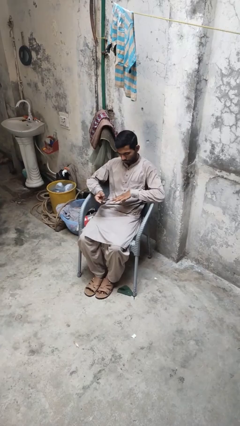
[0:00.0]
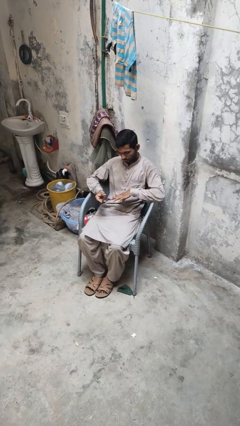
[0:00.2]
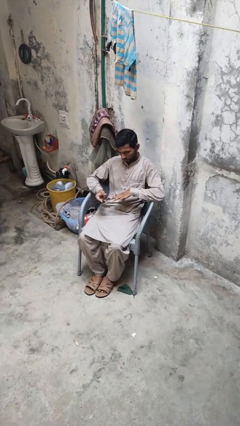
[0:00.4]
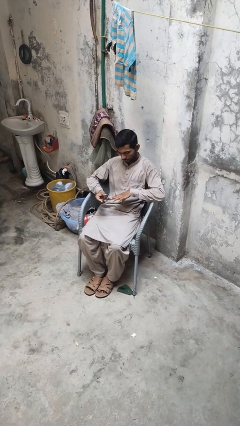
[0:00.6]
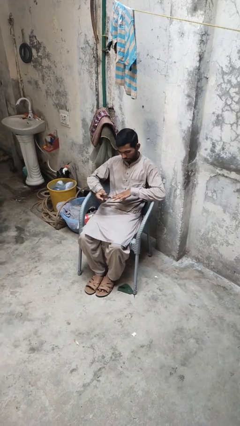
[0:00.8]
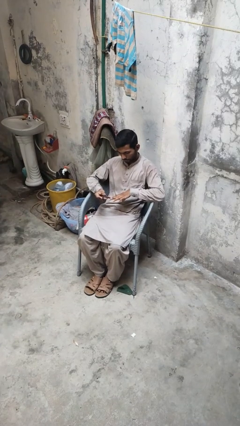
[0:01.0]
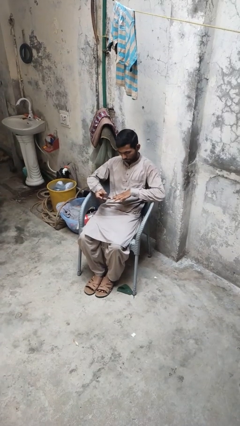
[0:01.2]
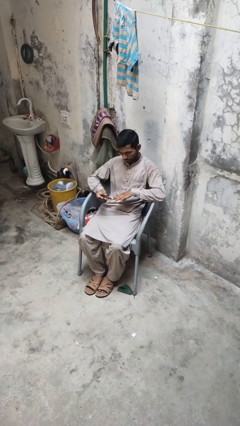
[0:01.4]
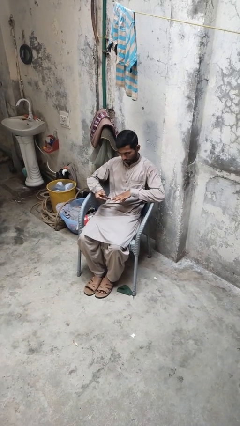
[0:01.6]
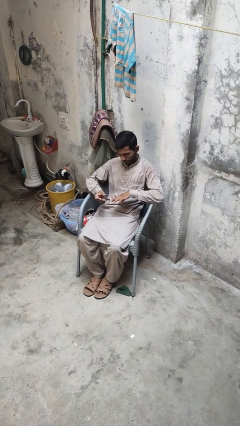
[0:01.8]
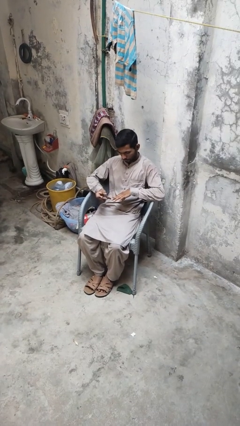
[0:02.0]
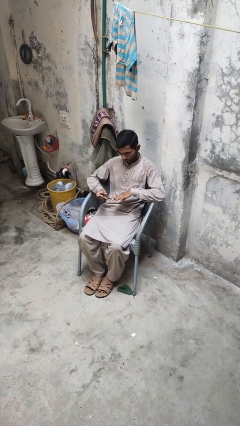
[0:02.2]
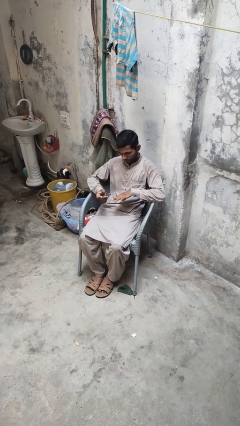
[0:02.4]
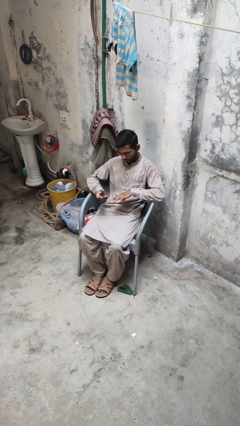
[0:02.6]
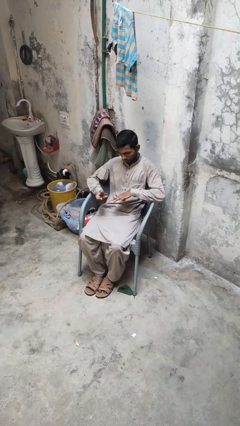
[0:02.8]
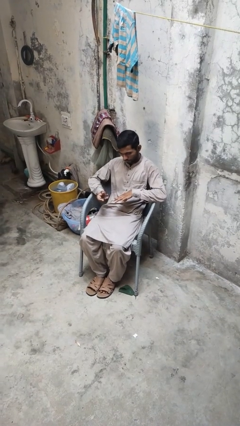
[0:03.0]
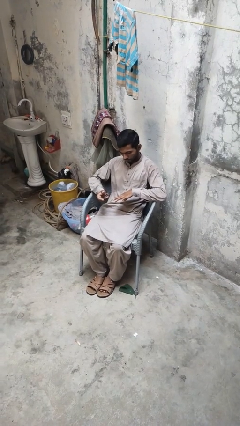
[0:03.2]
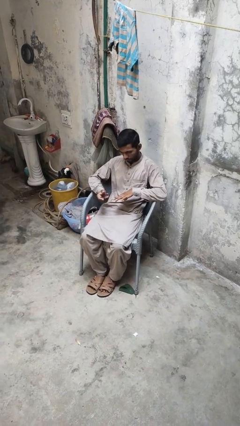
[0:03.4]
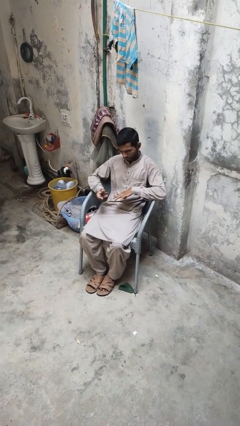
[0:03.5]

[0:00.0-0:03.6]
person clips fingernails

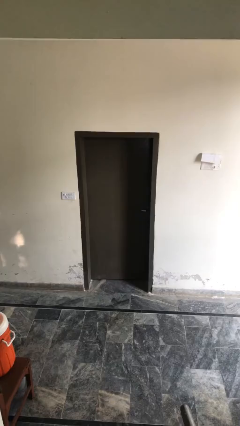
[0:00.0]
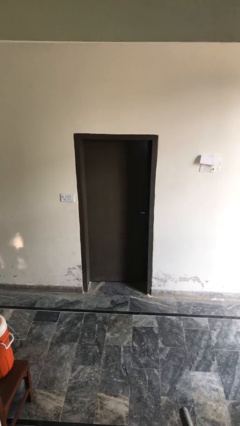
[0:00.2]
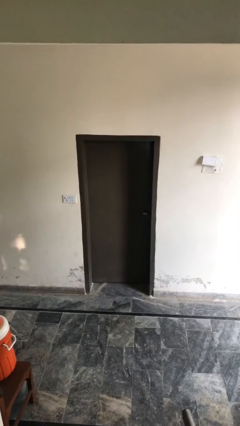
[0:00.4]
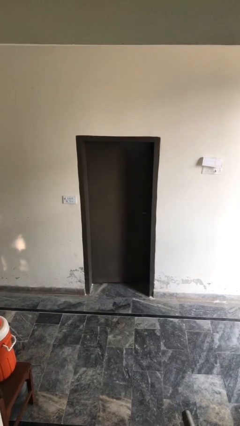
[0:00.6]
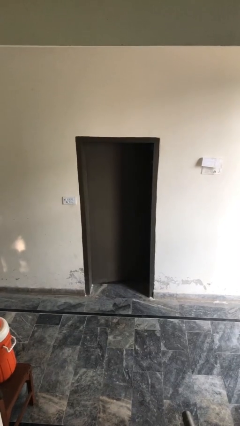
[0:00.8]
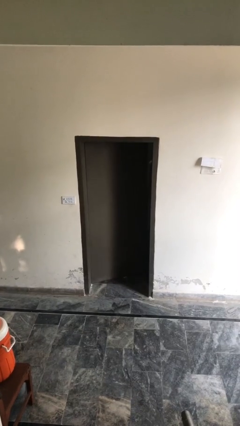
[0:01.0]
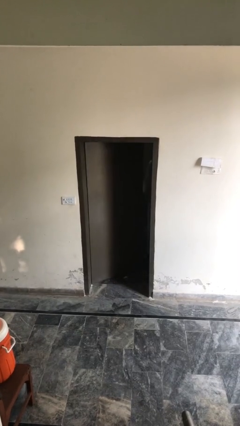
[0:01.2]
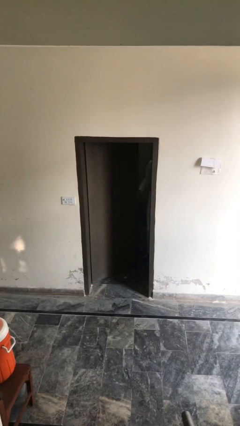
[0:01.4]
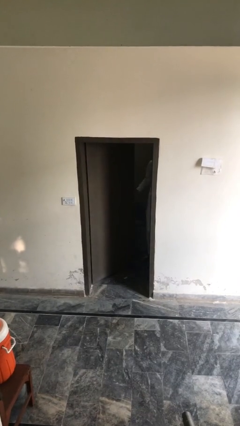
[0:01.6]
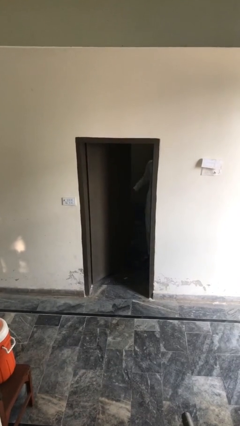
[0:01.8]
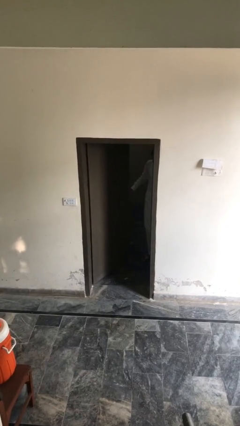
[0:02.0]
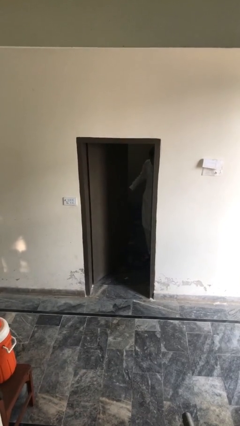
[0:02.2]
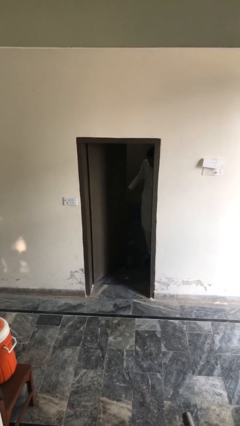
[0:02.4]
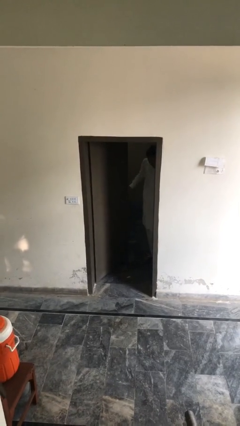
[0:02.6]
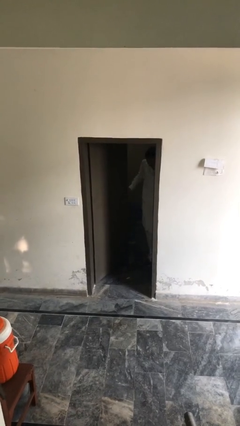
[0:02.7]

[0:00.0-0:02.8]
person opens facility door

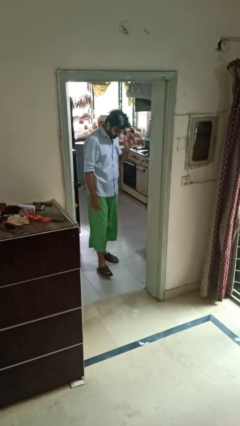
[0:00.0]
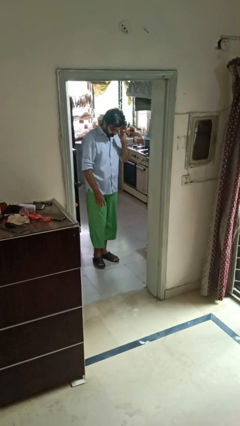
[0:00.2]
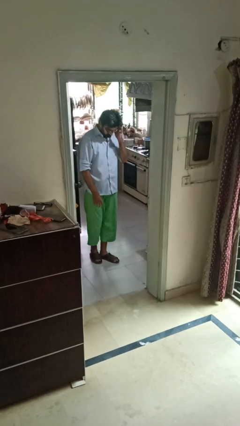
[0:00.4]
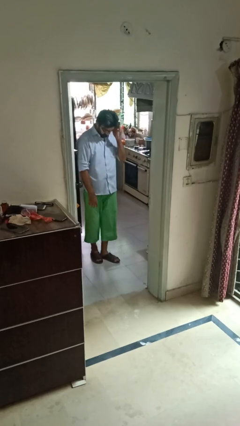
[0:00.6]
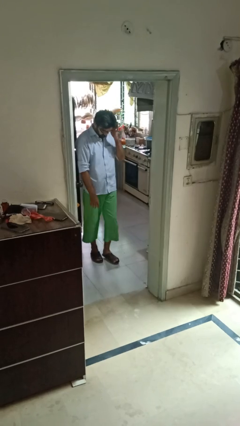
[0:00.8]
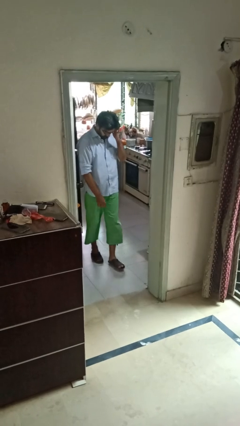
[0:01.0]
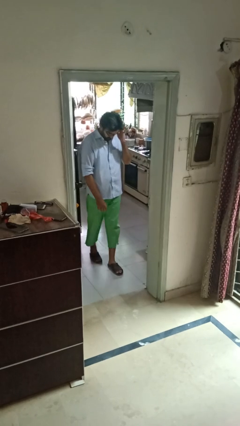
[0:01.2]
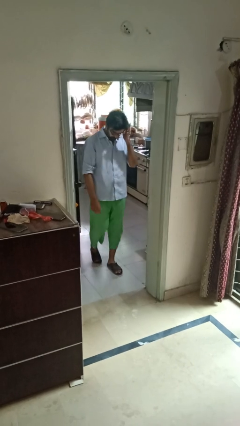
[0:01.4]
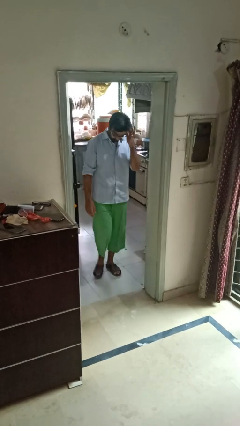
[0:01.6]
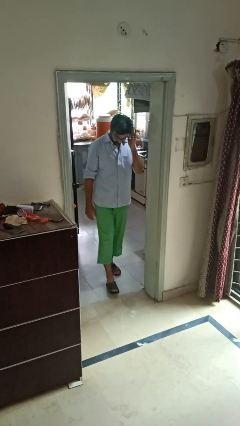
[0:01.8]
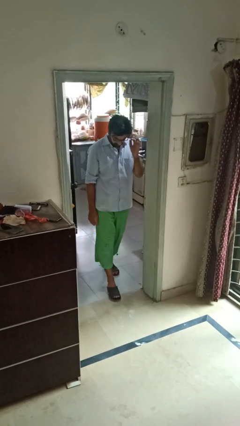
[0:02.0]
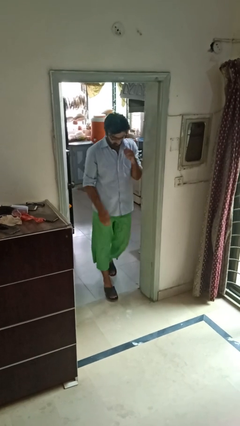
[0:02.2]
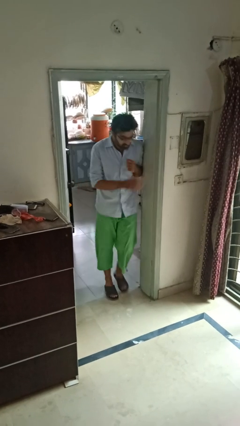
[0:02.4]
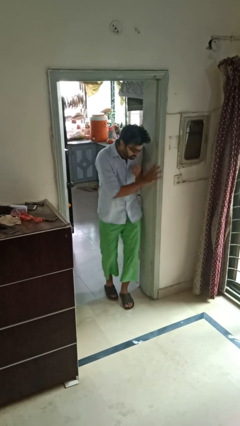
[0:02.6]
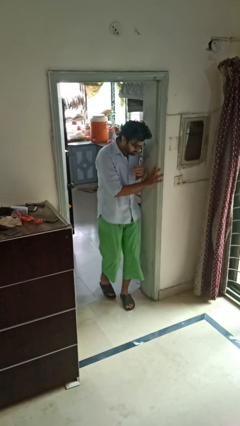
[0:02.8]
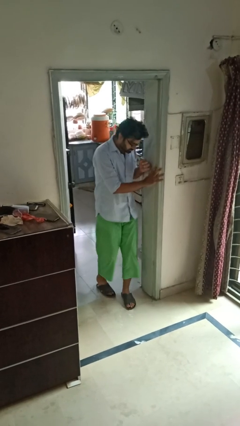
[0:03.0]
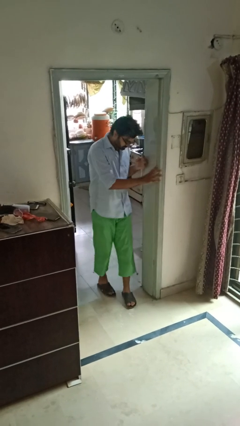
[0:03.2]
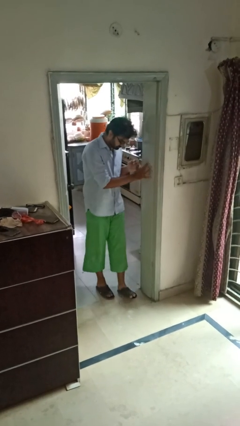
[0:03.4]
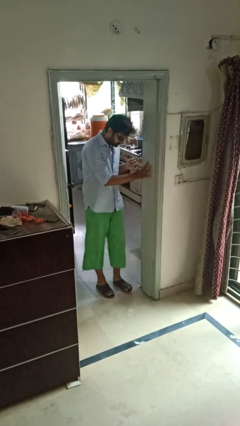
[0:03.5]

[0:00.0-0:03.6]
person bumps into wall

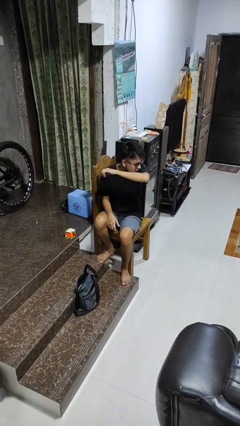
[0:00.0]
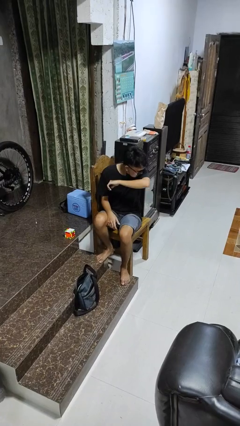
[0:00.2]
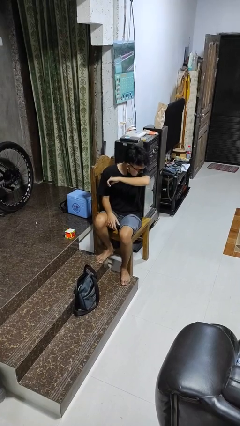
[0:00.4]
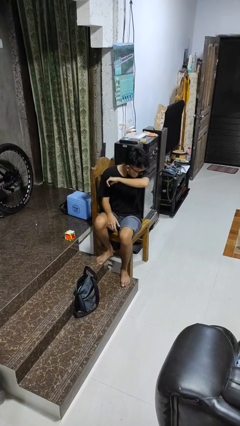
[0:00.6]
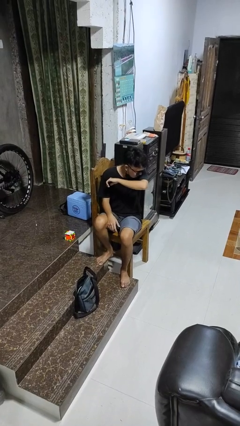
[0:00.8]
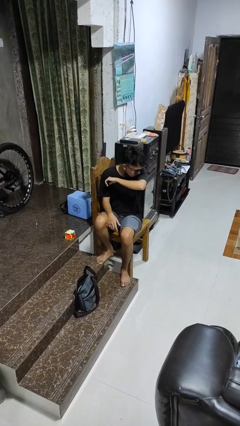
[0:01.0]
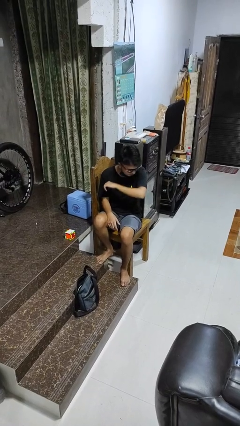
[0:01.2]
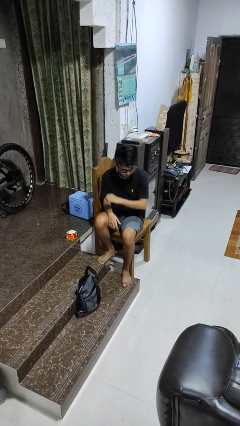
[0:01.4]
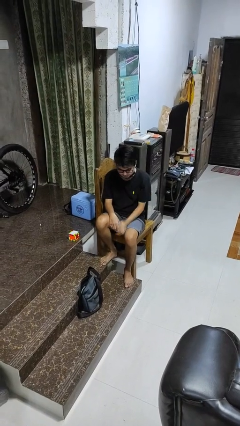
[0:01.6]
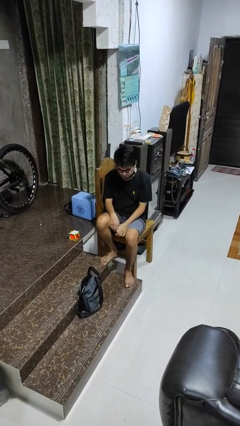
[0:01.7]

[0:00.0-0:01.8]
person sneezes into arm

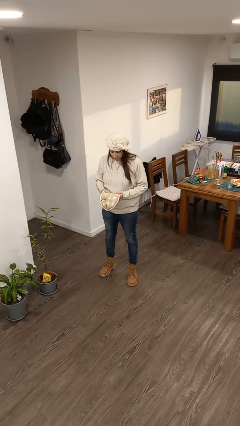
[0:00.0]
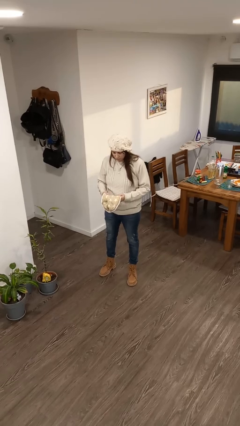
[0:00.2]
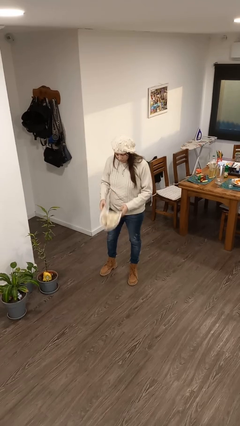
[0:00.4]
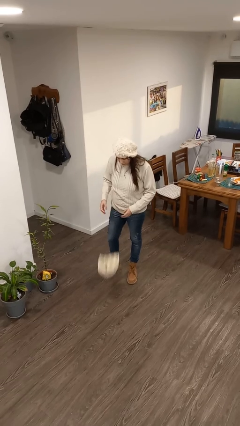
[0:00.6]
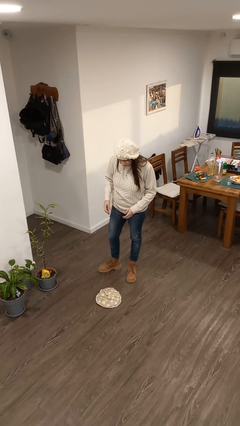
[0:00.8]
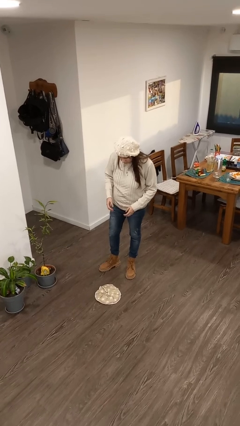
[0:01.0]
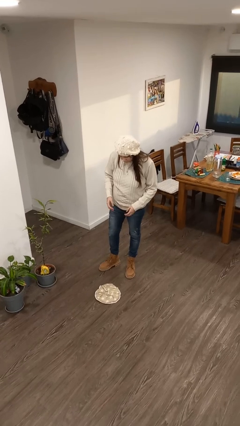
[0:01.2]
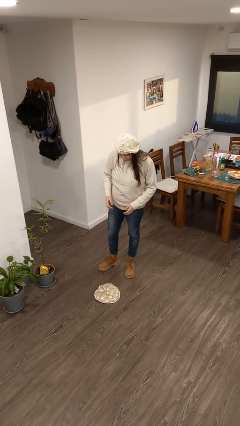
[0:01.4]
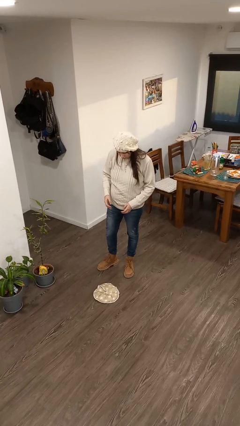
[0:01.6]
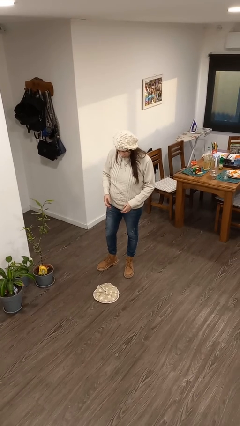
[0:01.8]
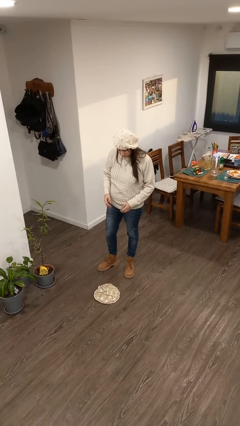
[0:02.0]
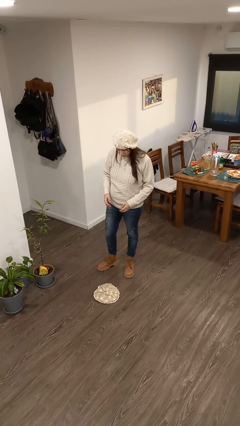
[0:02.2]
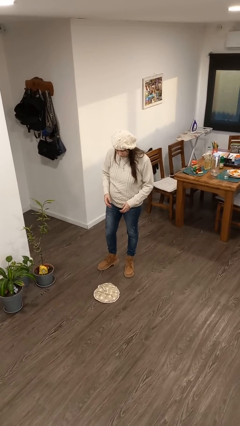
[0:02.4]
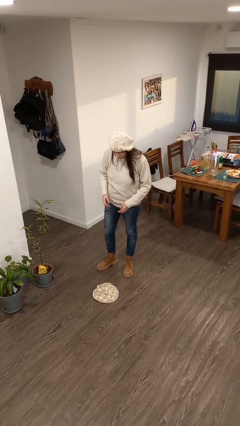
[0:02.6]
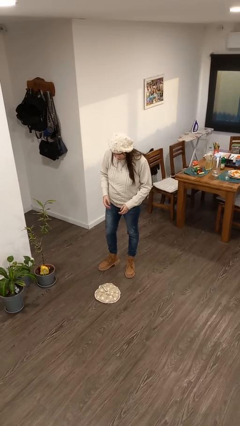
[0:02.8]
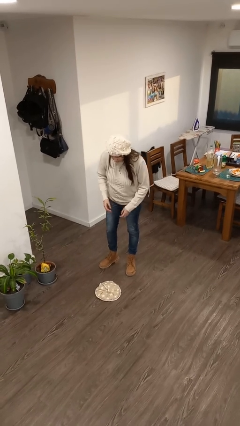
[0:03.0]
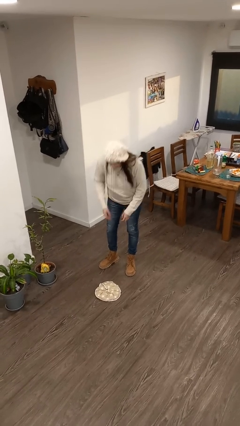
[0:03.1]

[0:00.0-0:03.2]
person drops object

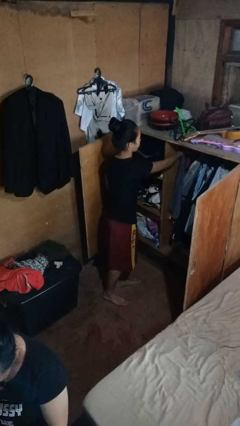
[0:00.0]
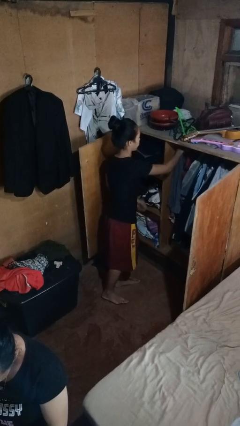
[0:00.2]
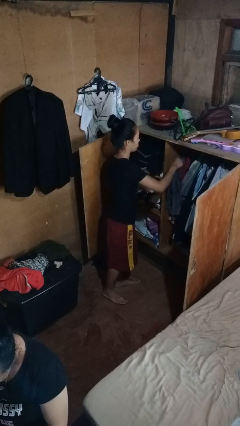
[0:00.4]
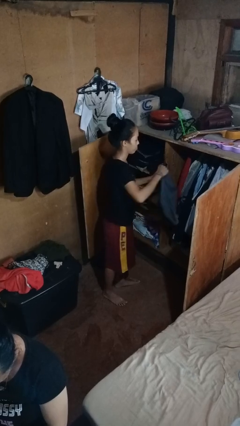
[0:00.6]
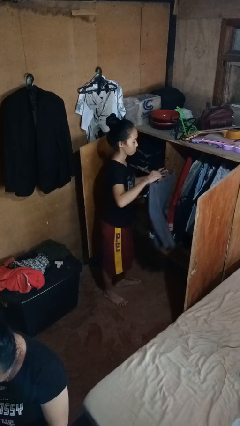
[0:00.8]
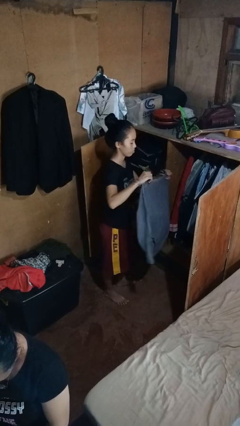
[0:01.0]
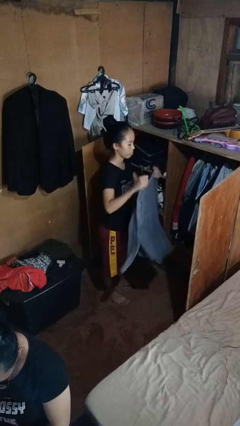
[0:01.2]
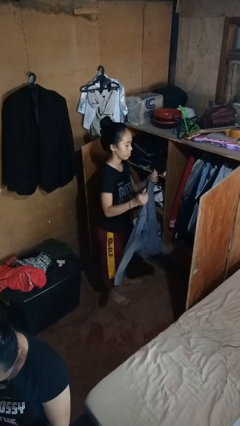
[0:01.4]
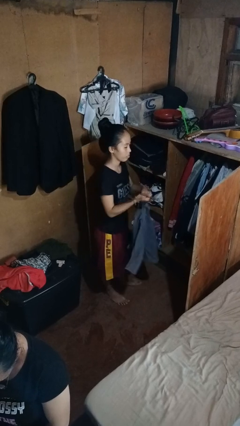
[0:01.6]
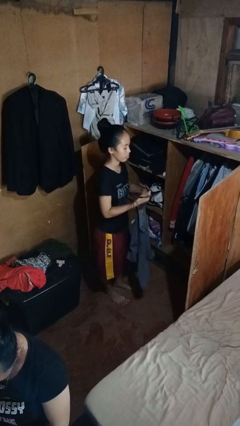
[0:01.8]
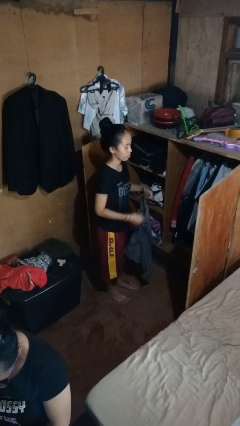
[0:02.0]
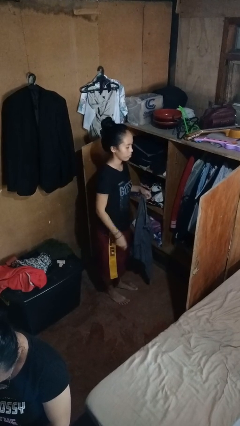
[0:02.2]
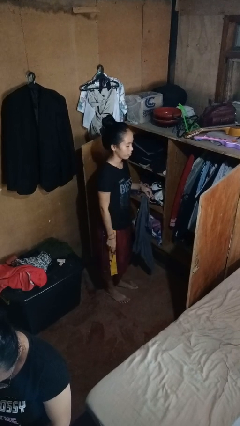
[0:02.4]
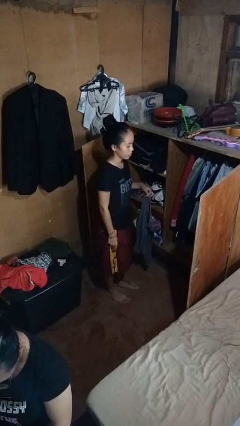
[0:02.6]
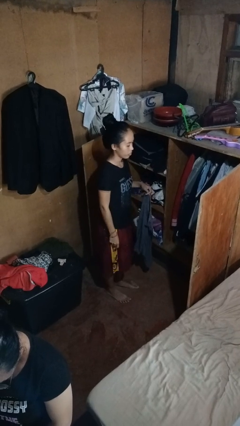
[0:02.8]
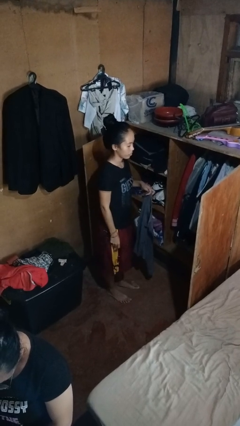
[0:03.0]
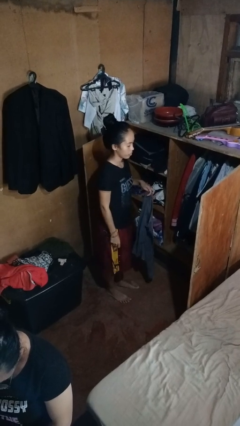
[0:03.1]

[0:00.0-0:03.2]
person takes clothes from closet
